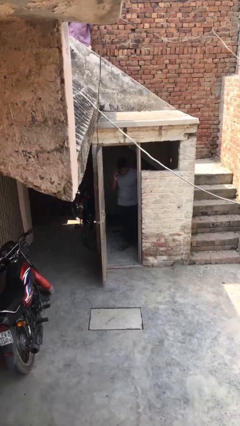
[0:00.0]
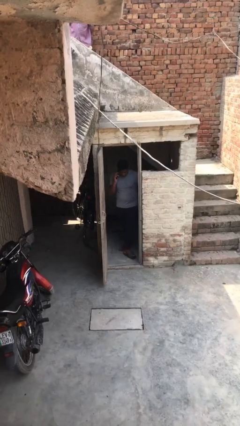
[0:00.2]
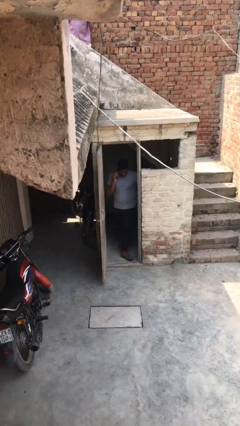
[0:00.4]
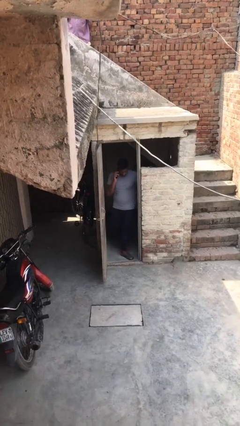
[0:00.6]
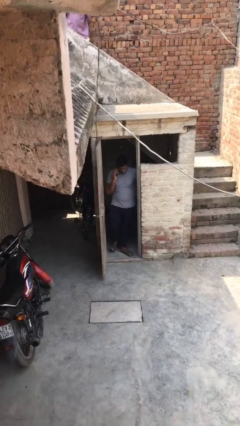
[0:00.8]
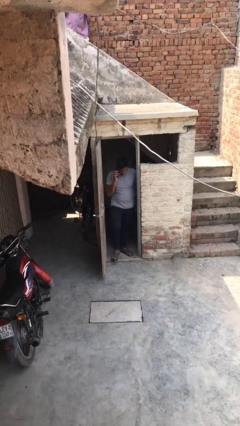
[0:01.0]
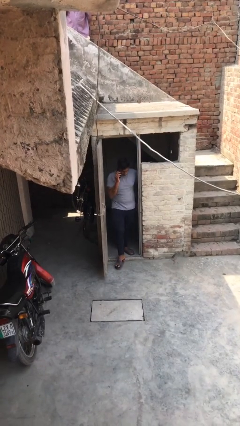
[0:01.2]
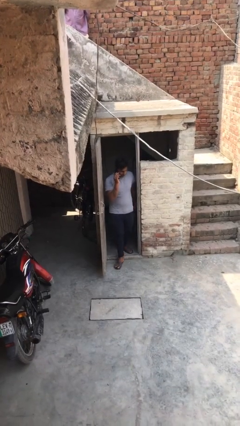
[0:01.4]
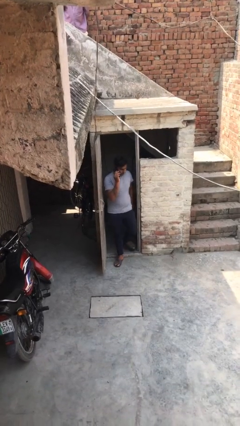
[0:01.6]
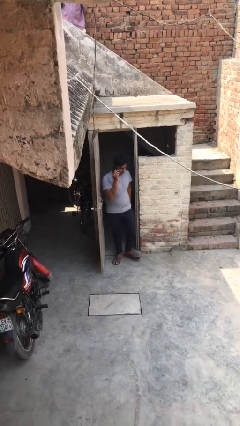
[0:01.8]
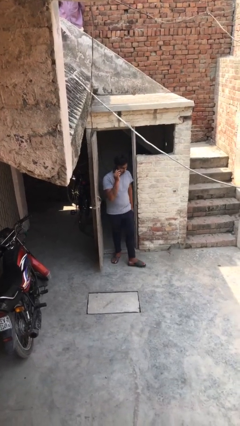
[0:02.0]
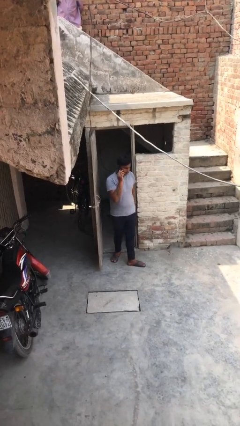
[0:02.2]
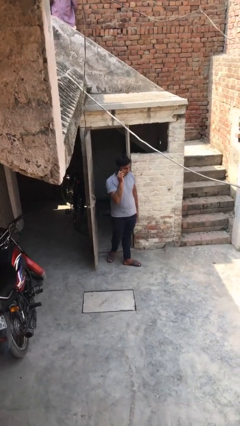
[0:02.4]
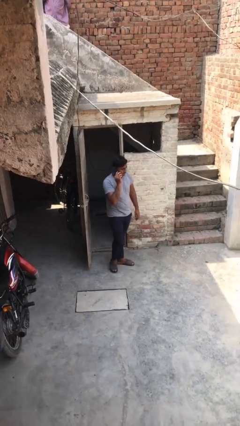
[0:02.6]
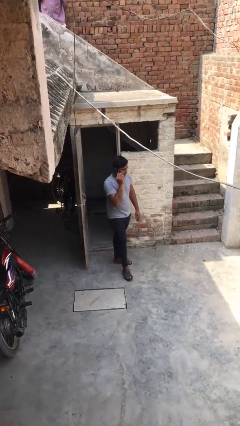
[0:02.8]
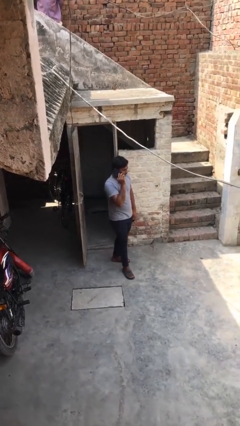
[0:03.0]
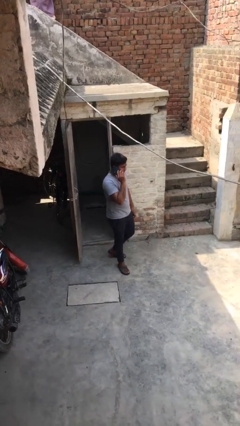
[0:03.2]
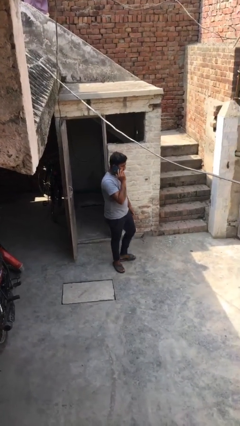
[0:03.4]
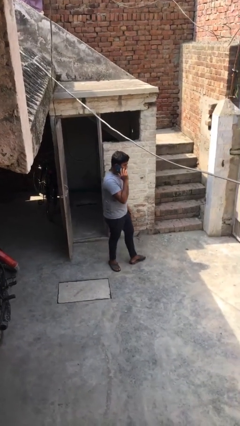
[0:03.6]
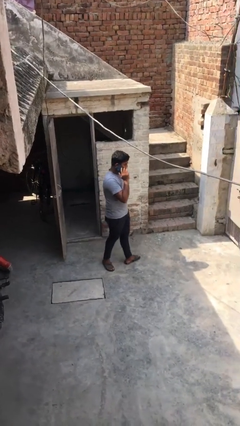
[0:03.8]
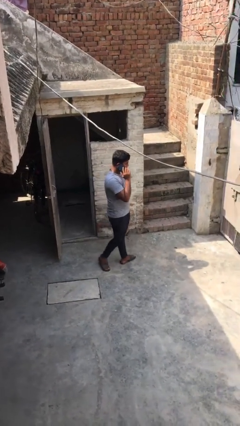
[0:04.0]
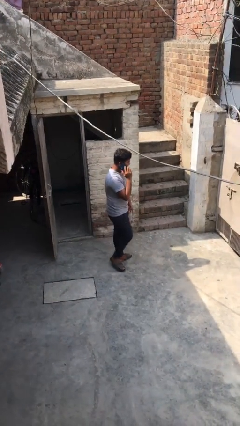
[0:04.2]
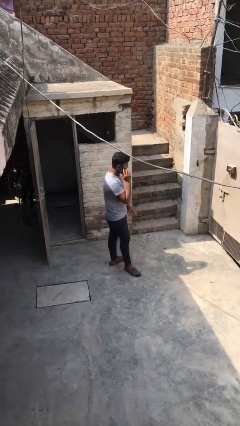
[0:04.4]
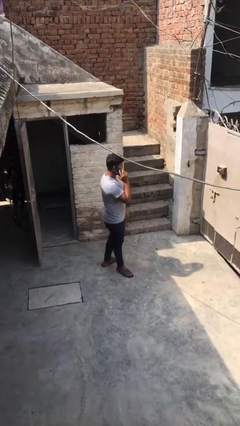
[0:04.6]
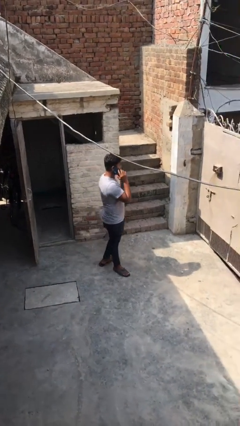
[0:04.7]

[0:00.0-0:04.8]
person enters scene through structure

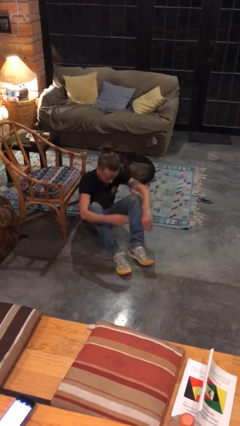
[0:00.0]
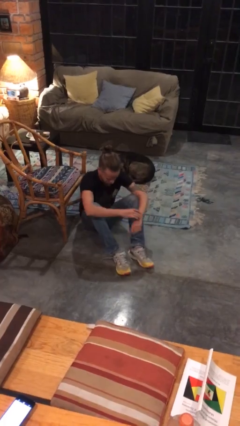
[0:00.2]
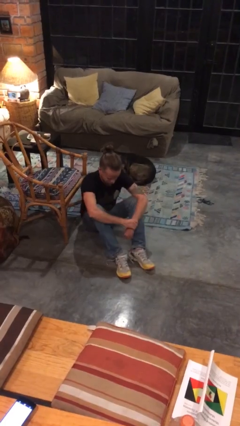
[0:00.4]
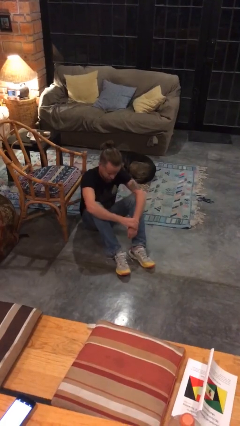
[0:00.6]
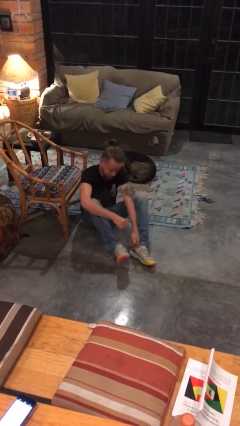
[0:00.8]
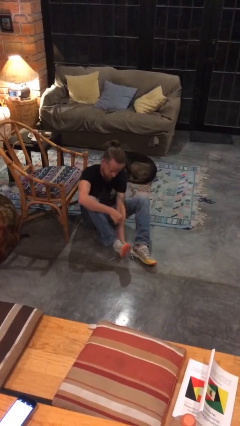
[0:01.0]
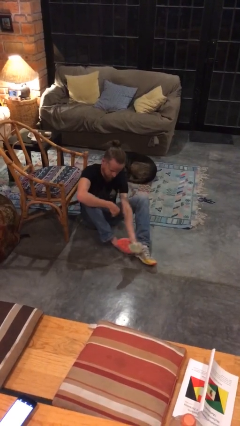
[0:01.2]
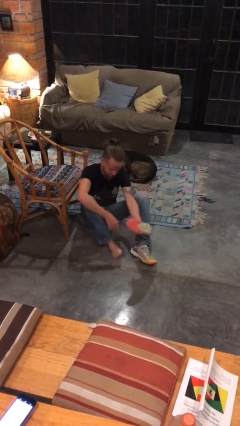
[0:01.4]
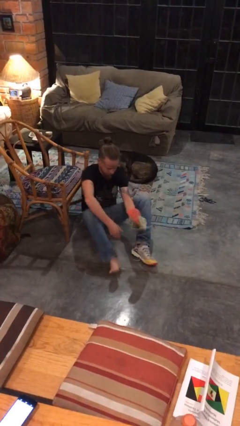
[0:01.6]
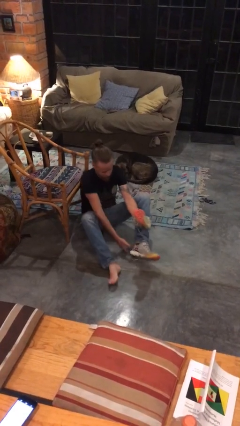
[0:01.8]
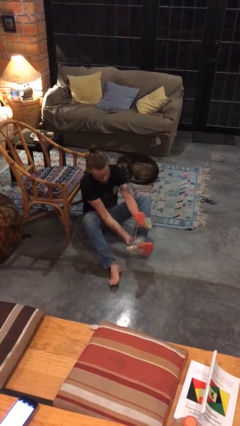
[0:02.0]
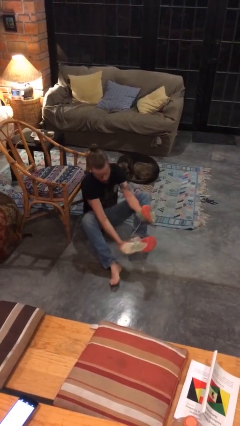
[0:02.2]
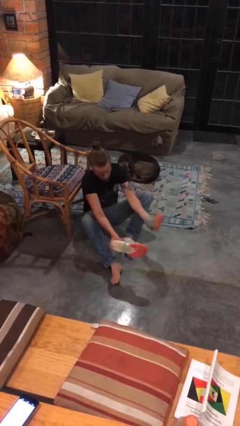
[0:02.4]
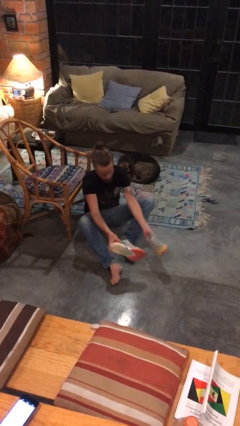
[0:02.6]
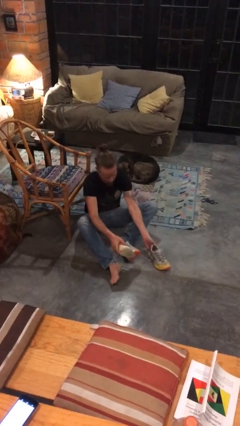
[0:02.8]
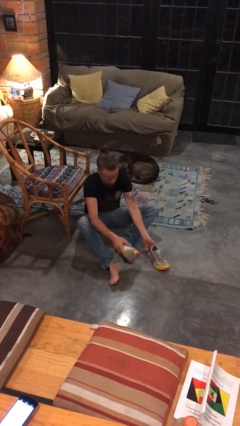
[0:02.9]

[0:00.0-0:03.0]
person takes off shoes

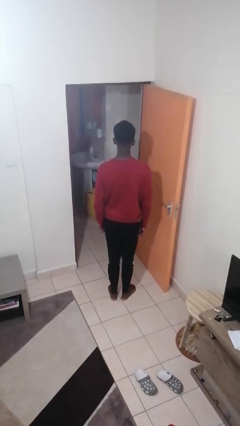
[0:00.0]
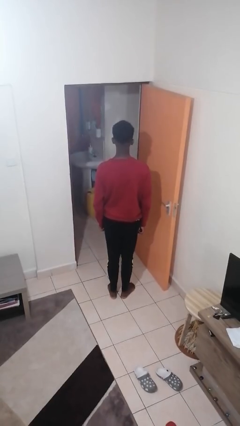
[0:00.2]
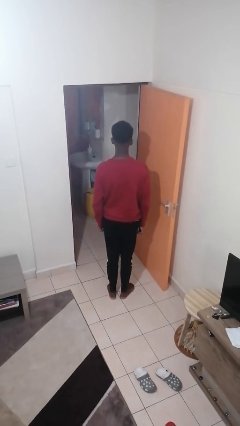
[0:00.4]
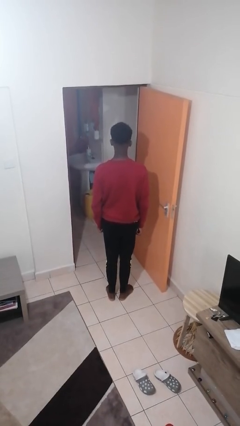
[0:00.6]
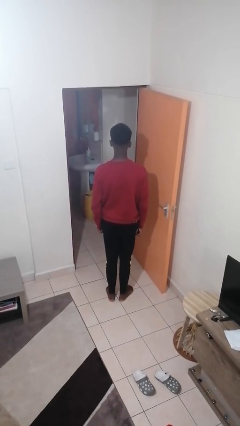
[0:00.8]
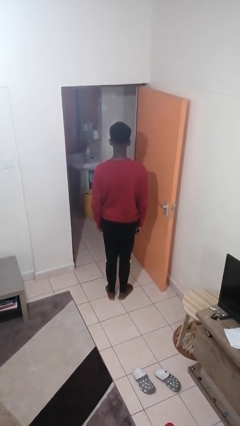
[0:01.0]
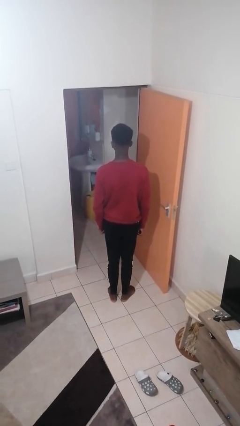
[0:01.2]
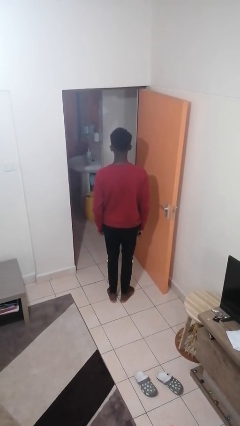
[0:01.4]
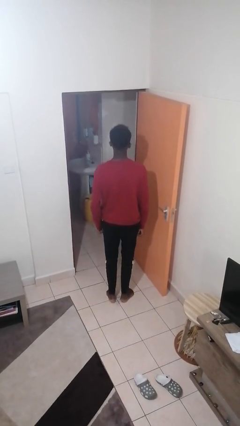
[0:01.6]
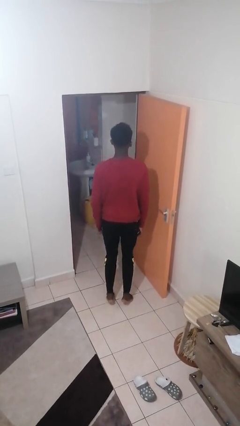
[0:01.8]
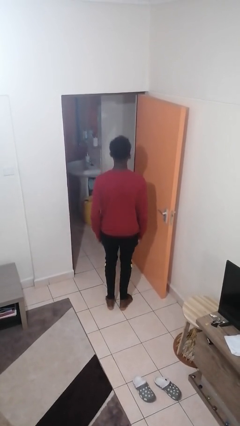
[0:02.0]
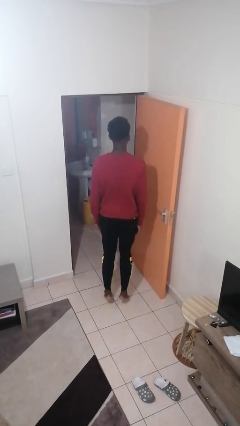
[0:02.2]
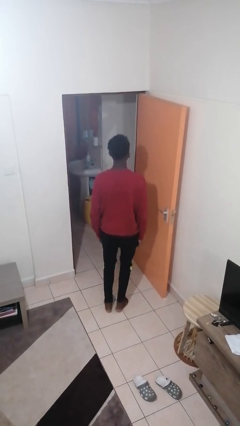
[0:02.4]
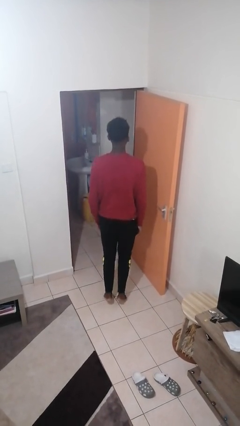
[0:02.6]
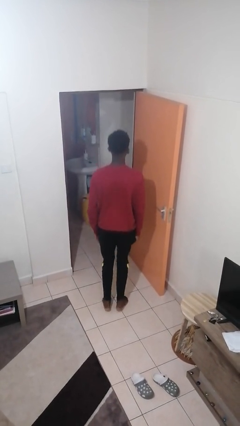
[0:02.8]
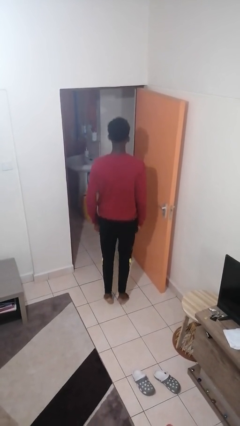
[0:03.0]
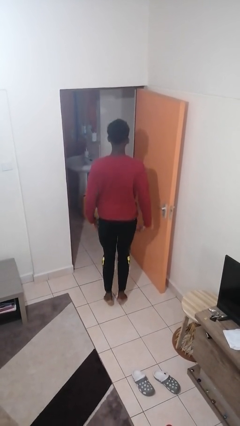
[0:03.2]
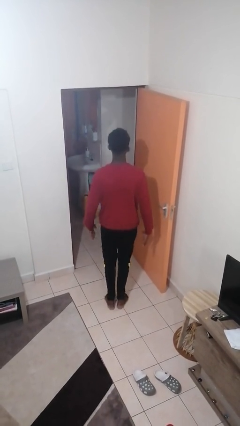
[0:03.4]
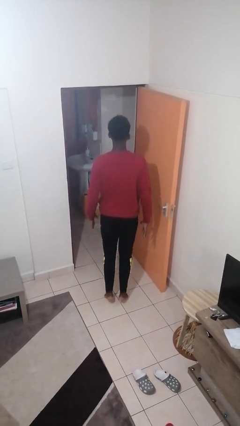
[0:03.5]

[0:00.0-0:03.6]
person drinks from straw

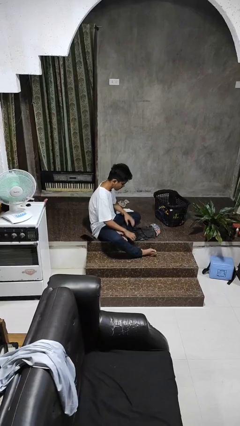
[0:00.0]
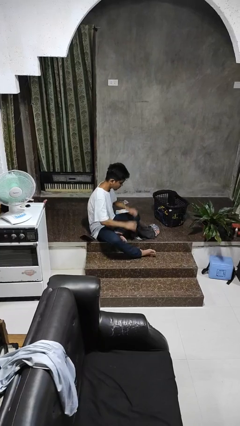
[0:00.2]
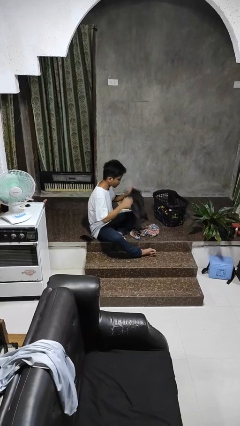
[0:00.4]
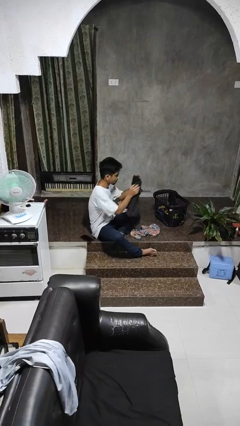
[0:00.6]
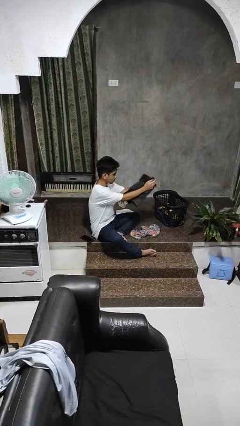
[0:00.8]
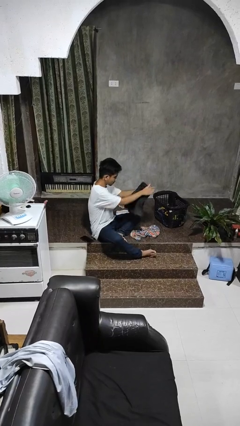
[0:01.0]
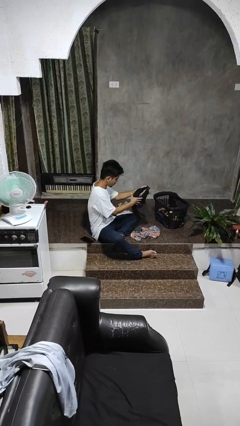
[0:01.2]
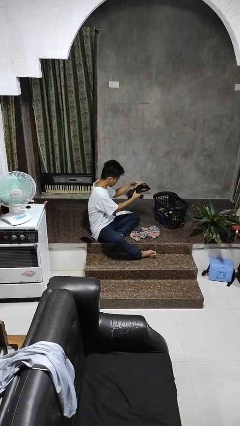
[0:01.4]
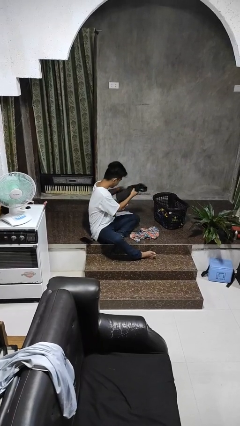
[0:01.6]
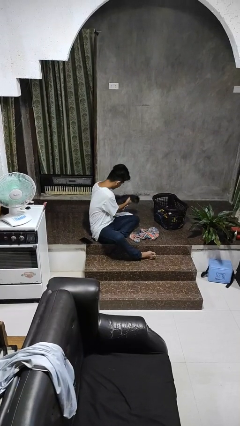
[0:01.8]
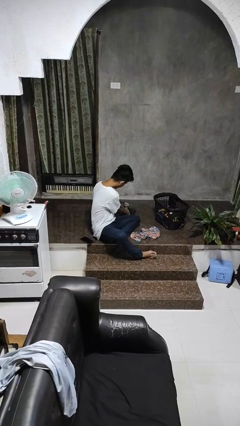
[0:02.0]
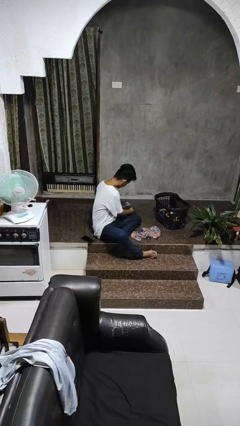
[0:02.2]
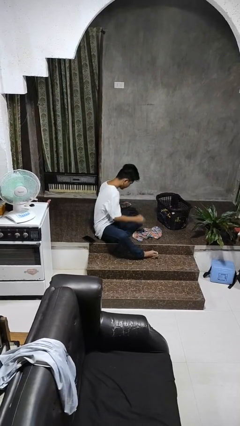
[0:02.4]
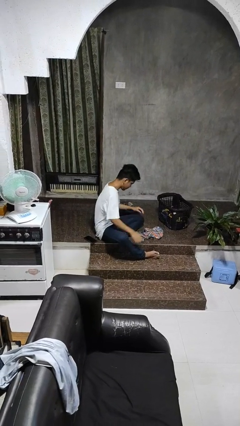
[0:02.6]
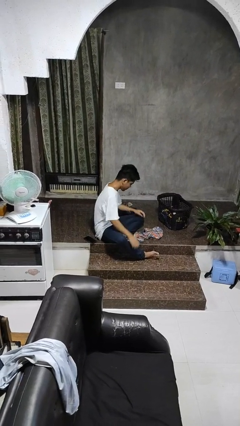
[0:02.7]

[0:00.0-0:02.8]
person folds pants

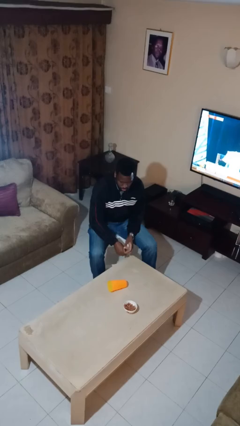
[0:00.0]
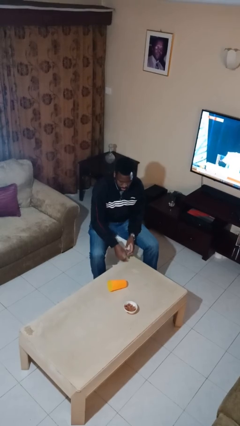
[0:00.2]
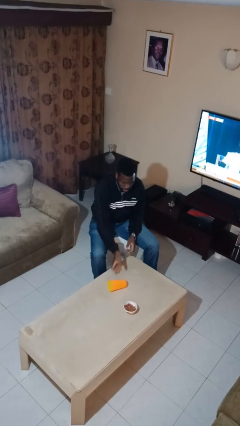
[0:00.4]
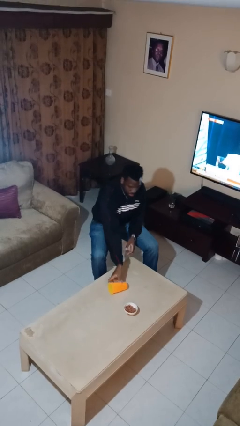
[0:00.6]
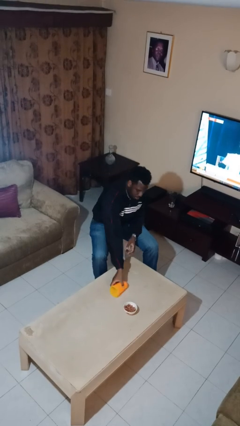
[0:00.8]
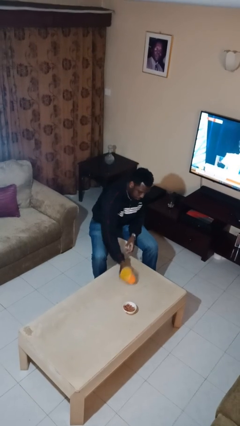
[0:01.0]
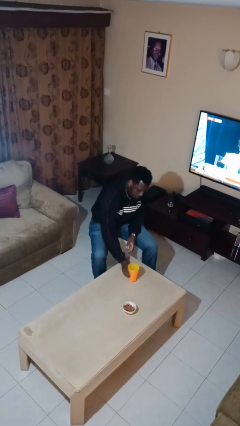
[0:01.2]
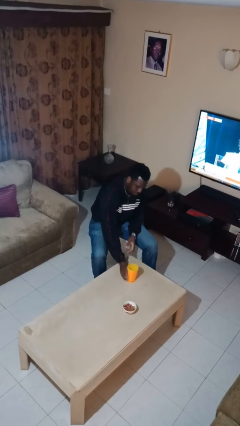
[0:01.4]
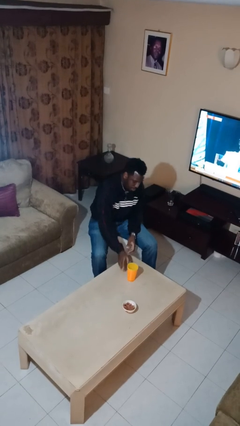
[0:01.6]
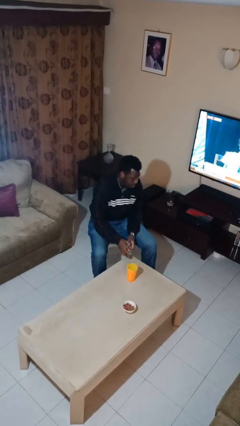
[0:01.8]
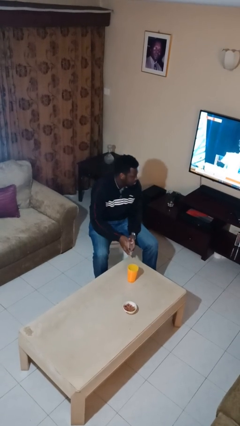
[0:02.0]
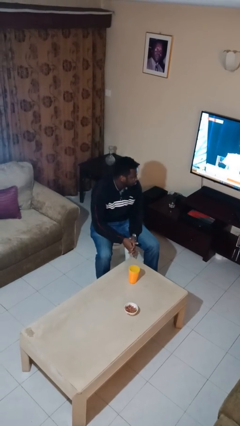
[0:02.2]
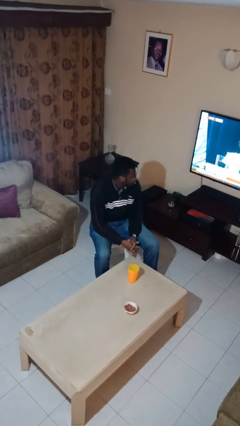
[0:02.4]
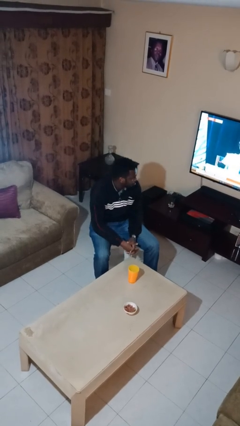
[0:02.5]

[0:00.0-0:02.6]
person sets upright glass

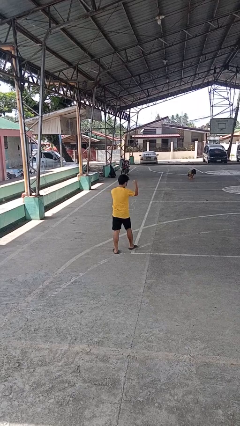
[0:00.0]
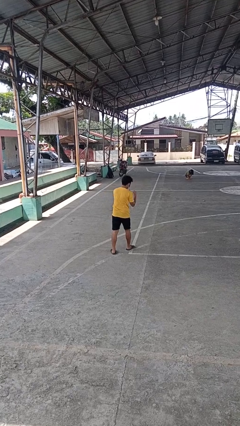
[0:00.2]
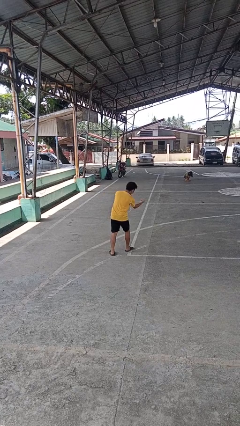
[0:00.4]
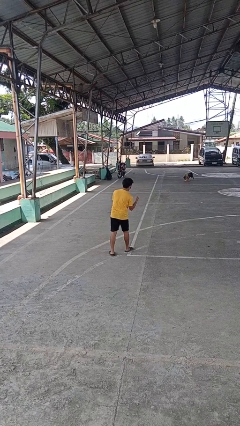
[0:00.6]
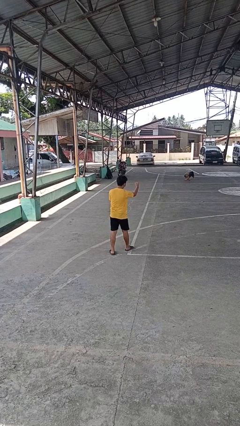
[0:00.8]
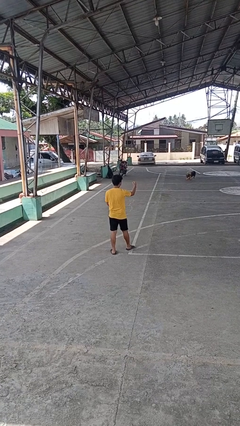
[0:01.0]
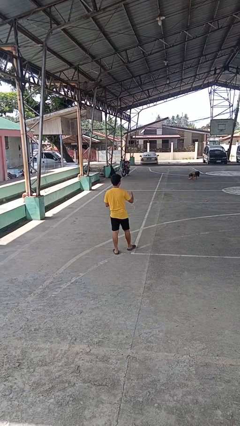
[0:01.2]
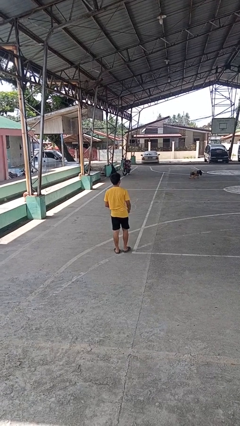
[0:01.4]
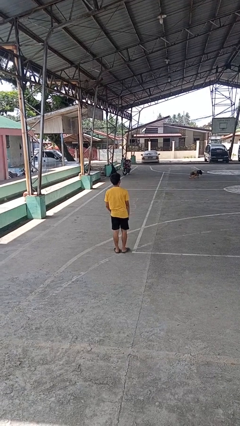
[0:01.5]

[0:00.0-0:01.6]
person punches
